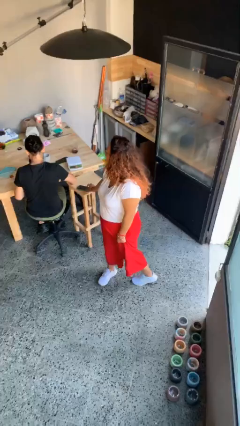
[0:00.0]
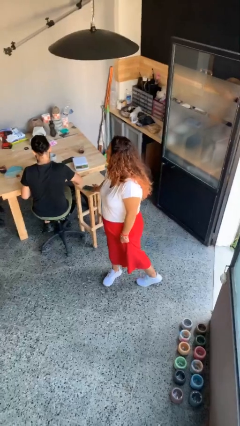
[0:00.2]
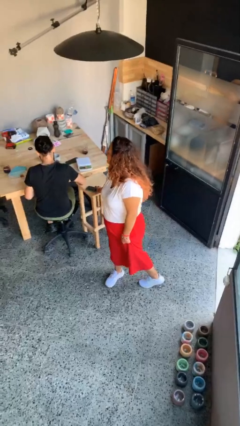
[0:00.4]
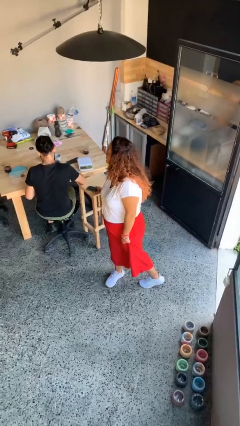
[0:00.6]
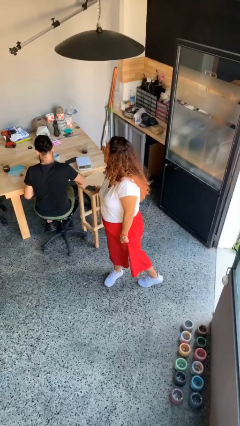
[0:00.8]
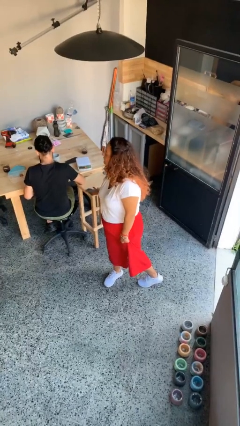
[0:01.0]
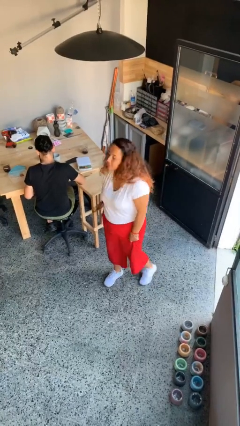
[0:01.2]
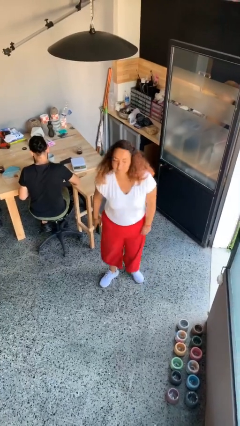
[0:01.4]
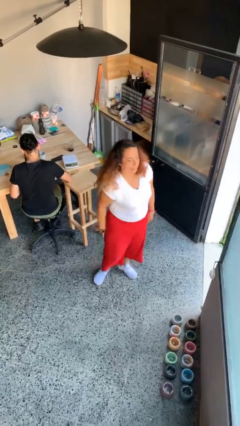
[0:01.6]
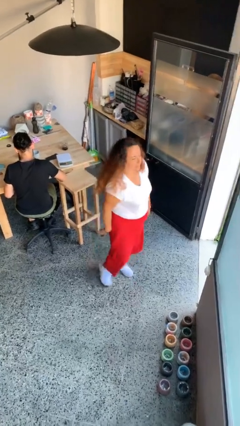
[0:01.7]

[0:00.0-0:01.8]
person steals object from person

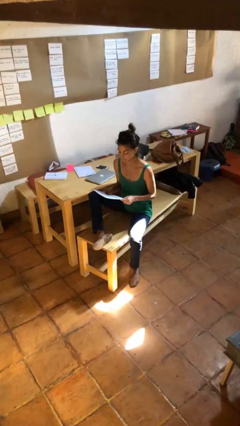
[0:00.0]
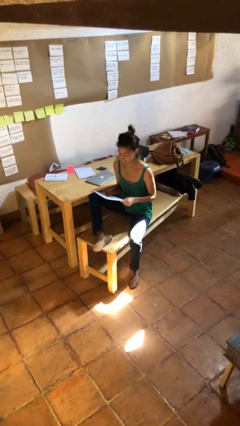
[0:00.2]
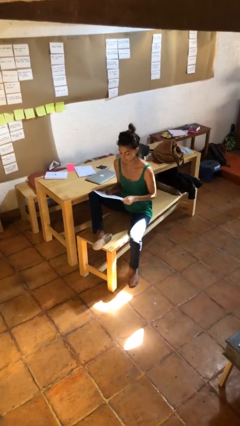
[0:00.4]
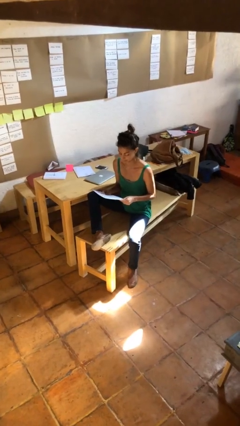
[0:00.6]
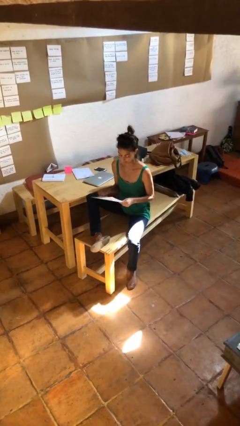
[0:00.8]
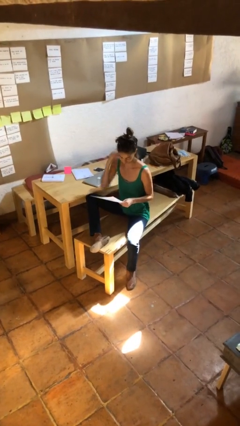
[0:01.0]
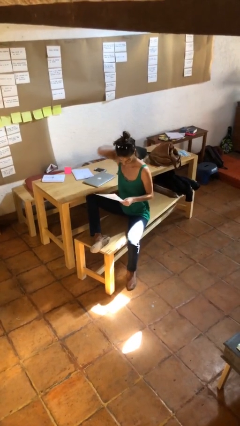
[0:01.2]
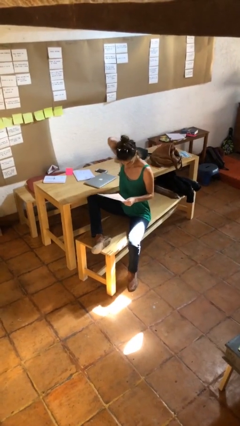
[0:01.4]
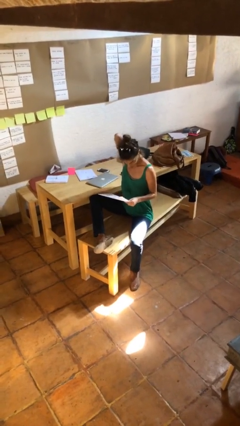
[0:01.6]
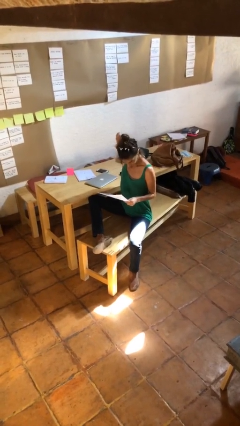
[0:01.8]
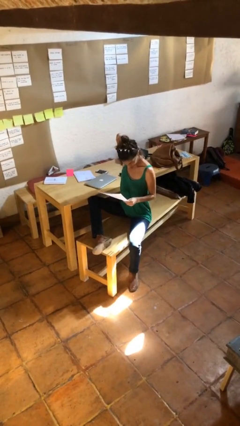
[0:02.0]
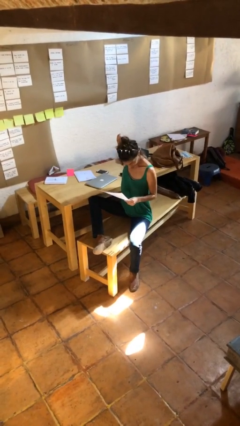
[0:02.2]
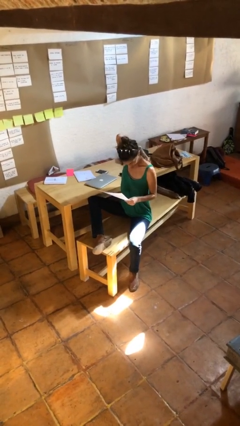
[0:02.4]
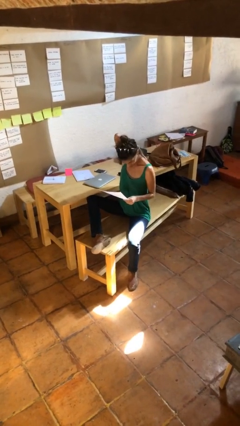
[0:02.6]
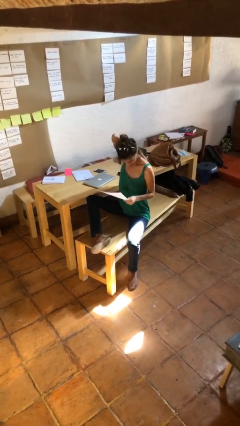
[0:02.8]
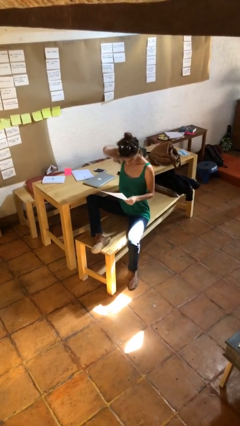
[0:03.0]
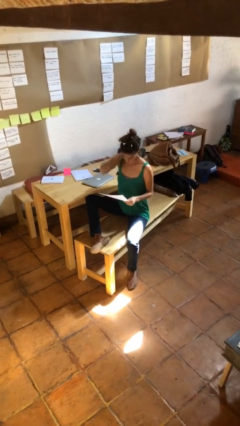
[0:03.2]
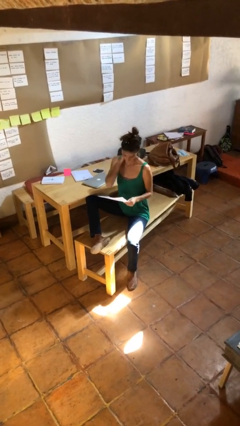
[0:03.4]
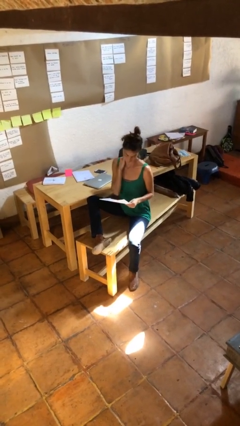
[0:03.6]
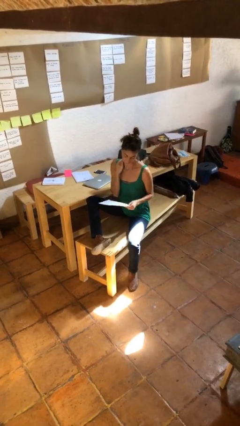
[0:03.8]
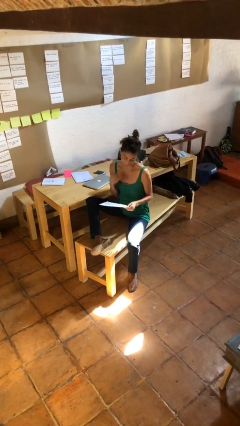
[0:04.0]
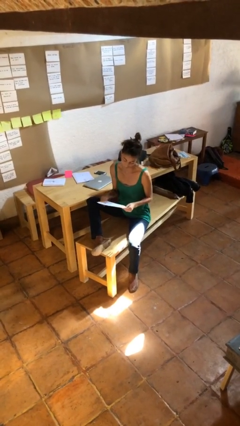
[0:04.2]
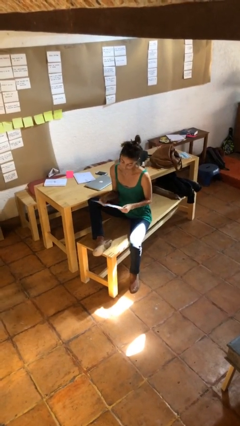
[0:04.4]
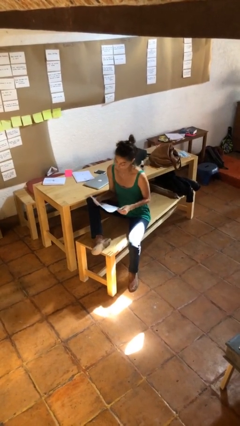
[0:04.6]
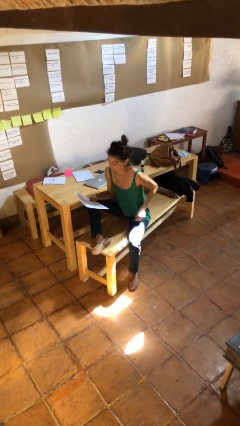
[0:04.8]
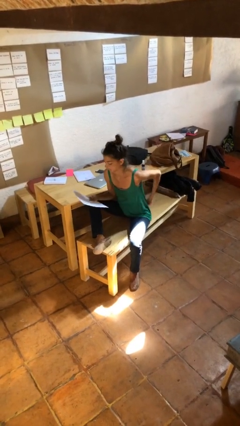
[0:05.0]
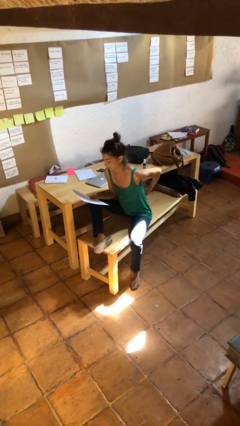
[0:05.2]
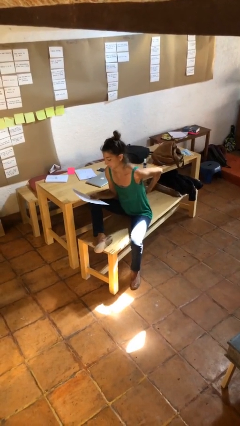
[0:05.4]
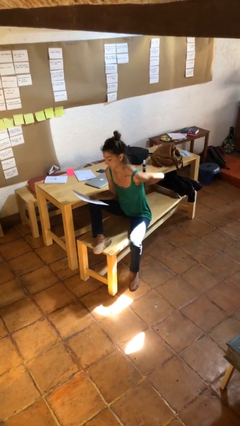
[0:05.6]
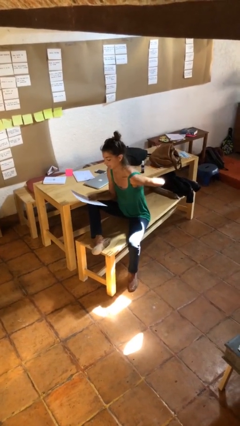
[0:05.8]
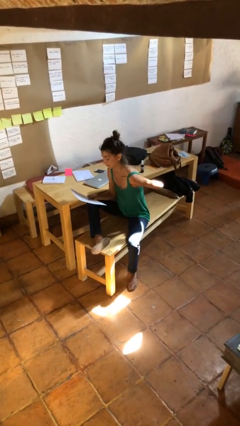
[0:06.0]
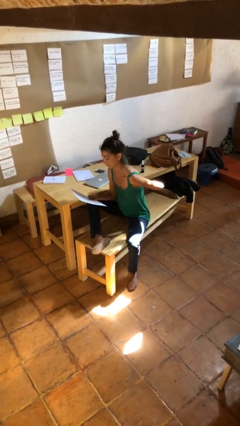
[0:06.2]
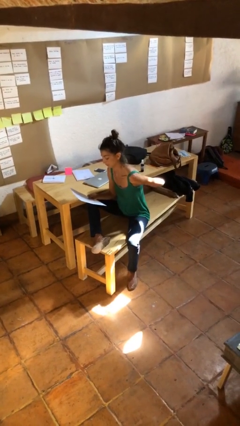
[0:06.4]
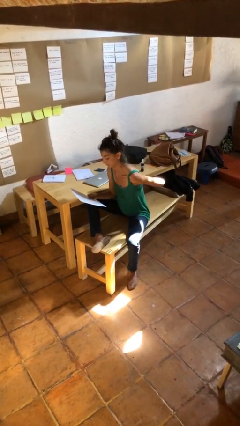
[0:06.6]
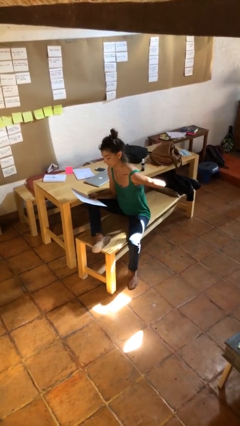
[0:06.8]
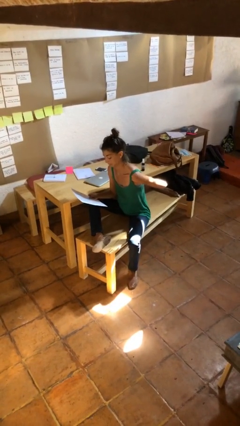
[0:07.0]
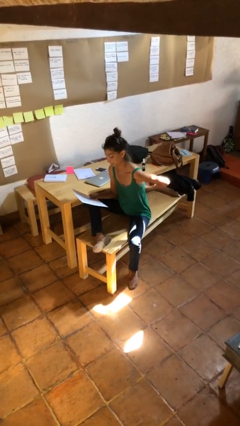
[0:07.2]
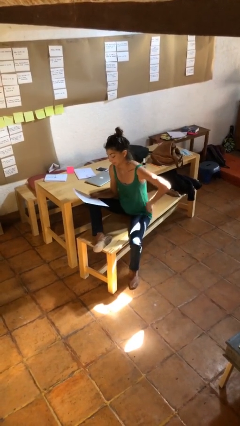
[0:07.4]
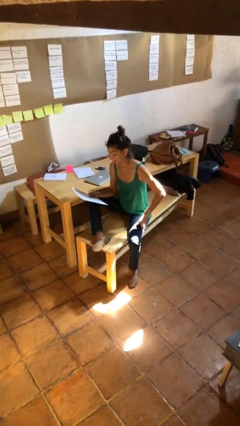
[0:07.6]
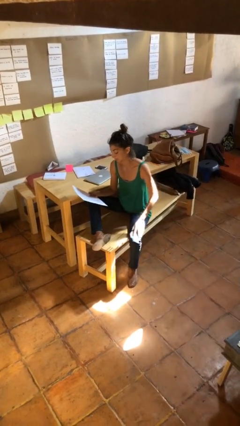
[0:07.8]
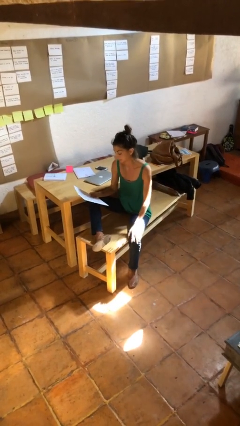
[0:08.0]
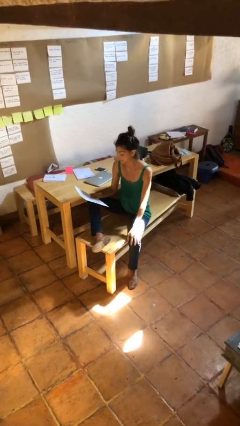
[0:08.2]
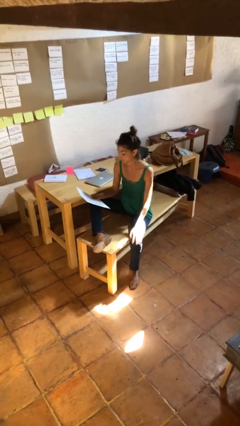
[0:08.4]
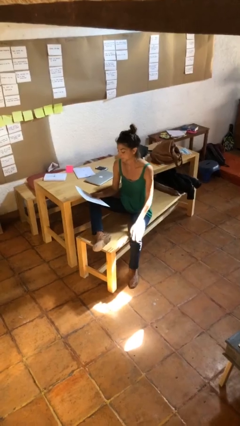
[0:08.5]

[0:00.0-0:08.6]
person reads document

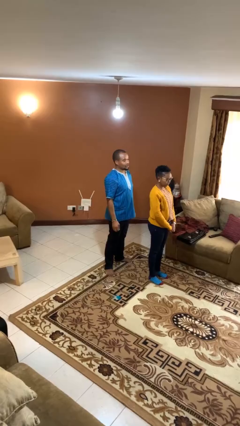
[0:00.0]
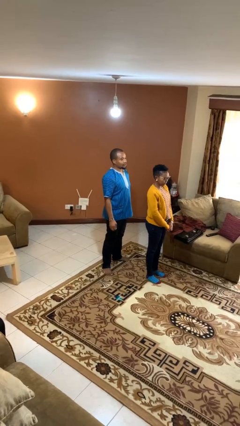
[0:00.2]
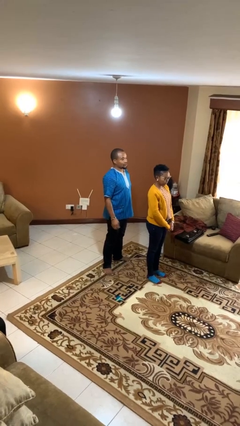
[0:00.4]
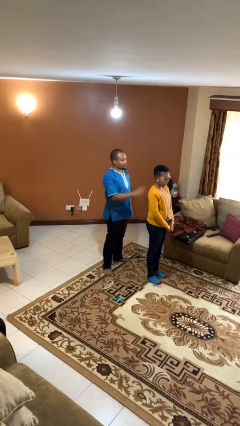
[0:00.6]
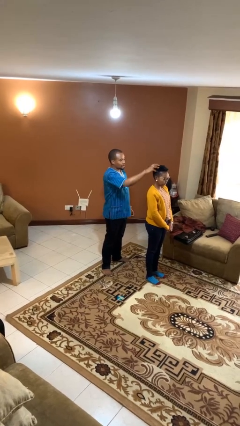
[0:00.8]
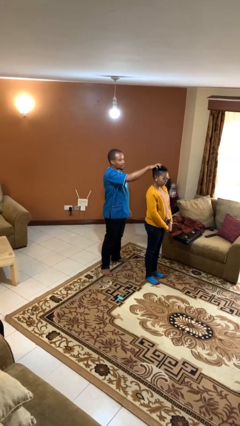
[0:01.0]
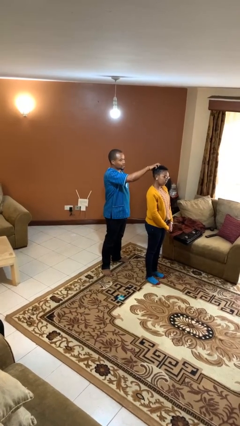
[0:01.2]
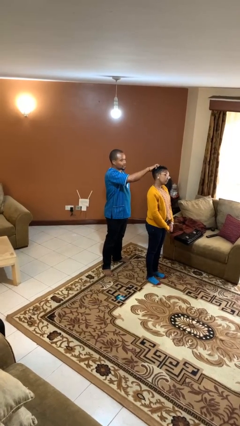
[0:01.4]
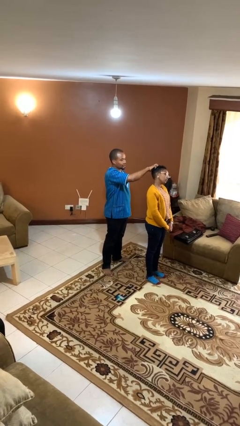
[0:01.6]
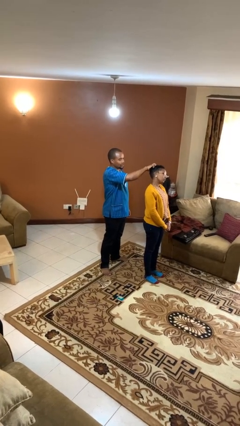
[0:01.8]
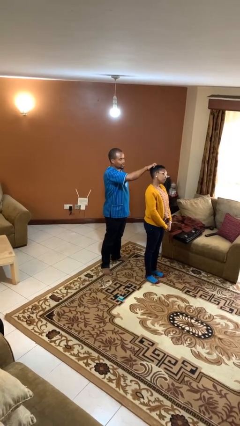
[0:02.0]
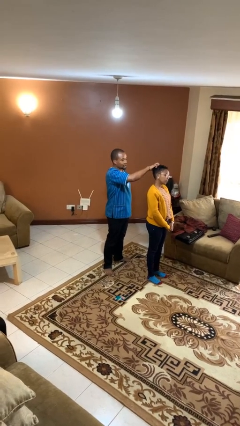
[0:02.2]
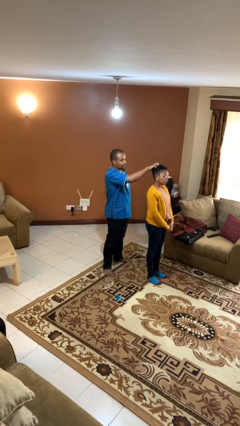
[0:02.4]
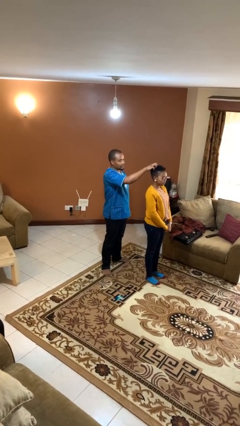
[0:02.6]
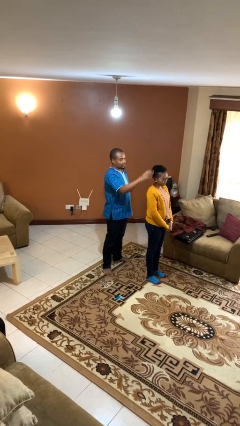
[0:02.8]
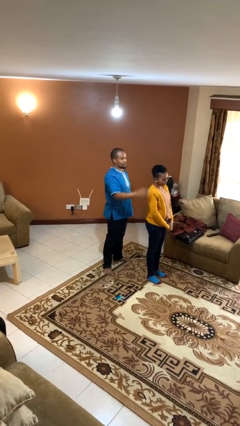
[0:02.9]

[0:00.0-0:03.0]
person grabs person by hair

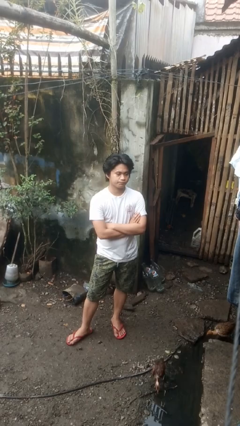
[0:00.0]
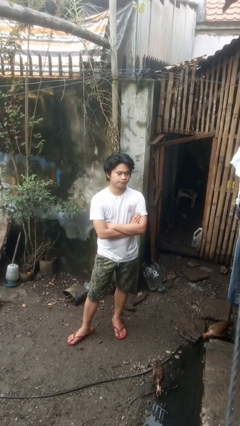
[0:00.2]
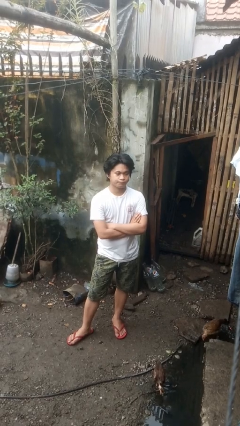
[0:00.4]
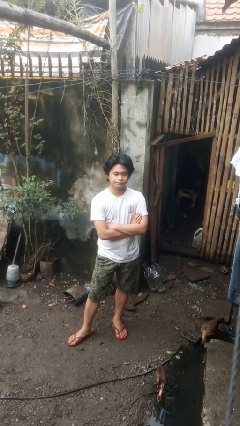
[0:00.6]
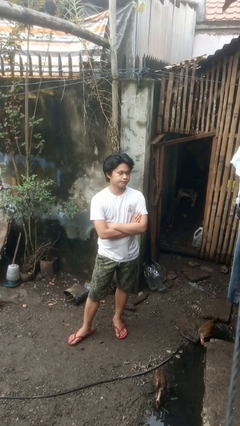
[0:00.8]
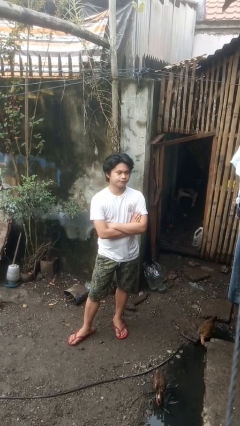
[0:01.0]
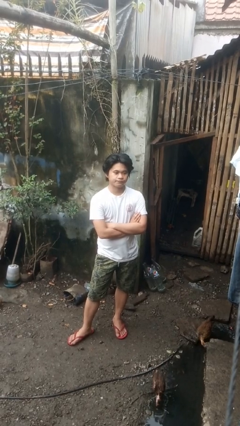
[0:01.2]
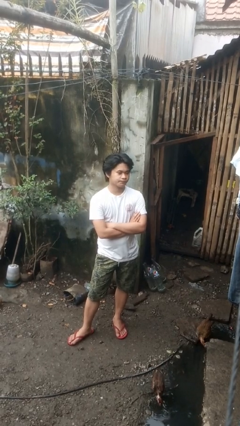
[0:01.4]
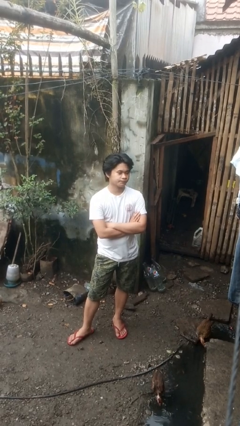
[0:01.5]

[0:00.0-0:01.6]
person shakes head

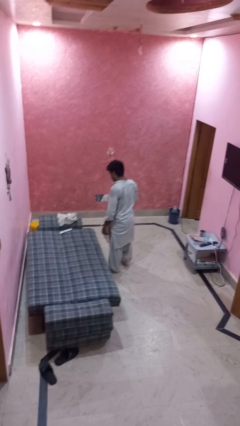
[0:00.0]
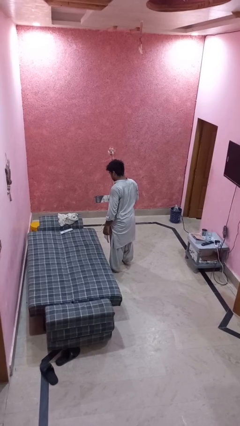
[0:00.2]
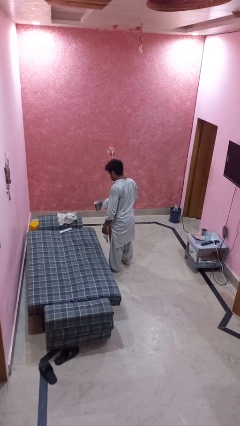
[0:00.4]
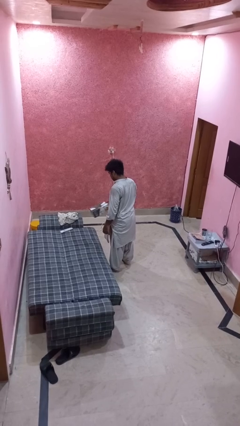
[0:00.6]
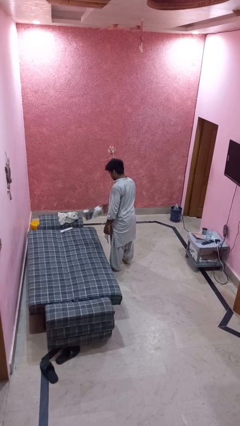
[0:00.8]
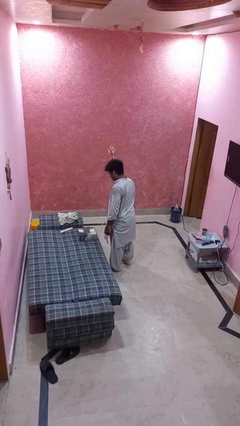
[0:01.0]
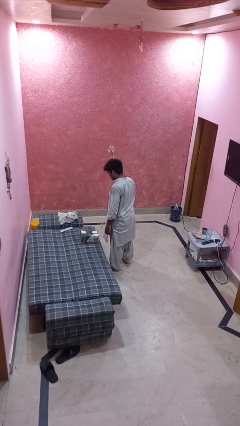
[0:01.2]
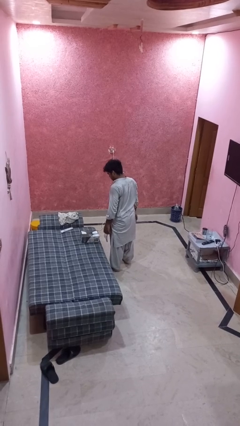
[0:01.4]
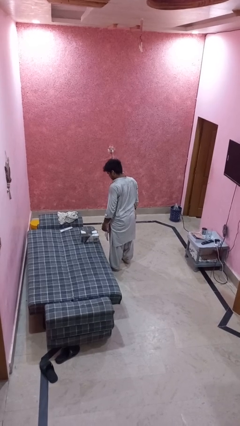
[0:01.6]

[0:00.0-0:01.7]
person throws object on bed

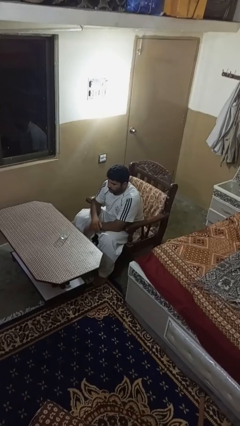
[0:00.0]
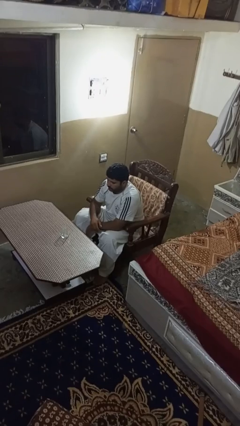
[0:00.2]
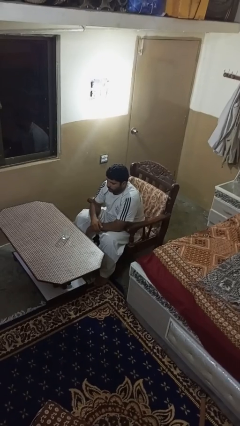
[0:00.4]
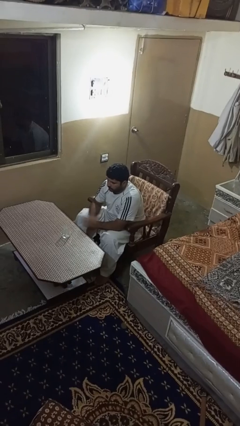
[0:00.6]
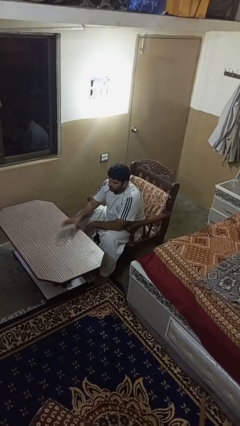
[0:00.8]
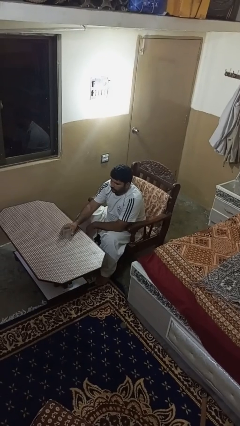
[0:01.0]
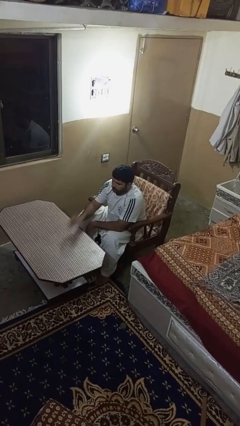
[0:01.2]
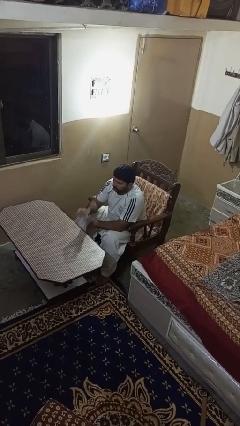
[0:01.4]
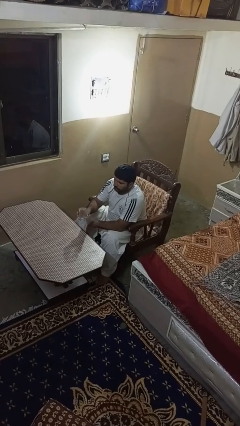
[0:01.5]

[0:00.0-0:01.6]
person picks up object from table
